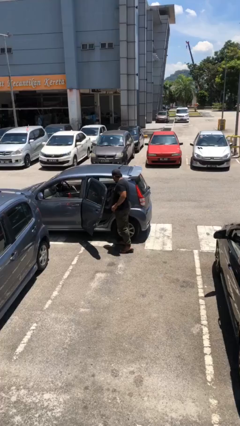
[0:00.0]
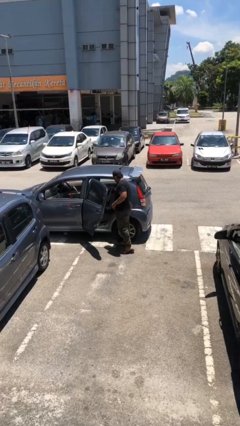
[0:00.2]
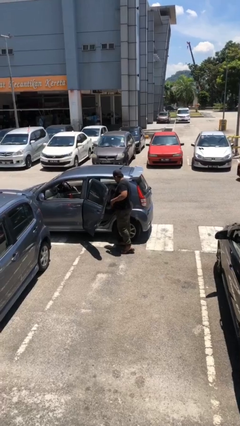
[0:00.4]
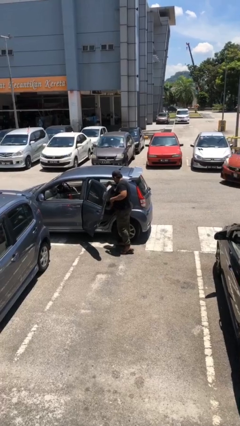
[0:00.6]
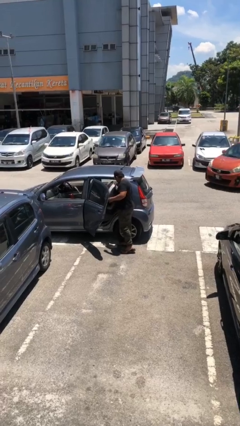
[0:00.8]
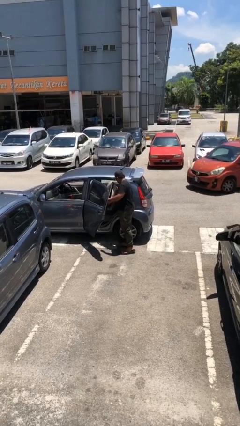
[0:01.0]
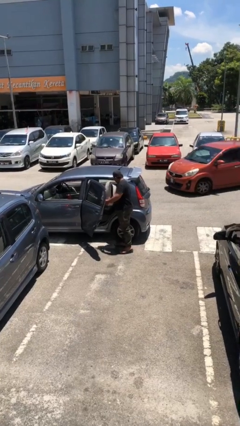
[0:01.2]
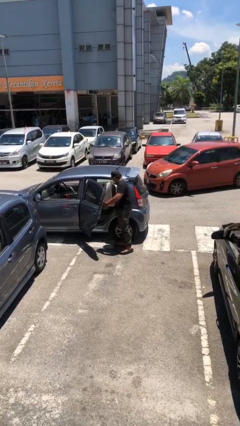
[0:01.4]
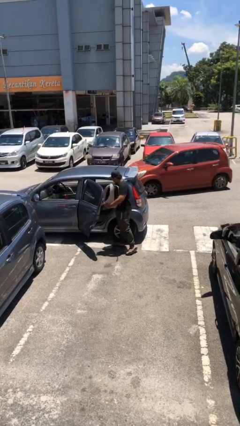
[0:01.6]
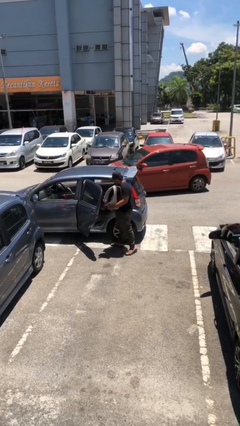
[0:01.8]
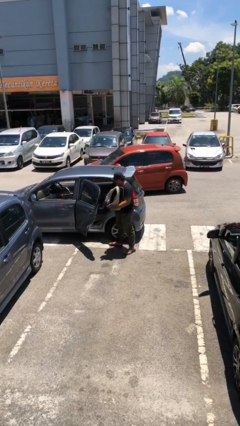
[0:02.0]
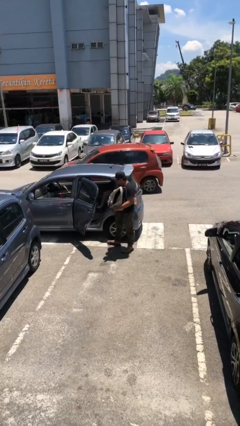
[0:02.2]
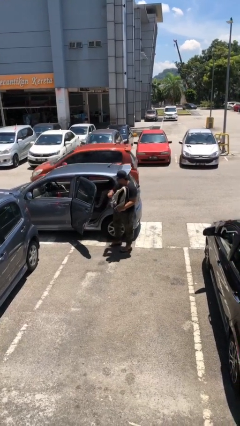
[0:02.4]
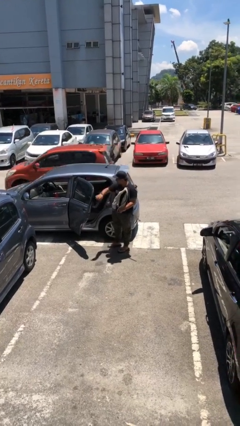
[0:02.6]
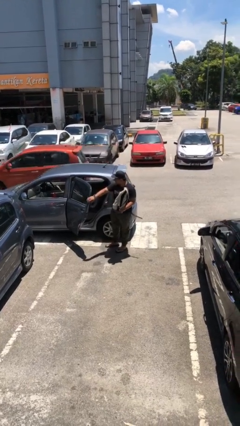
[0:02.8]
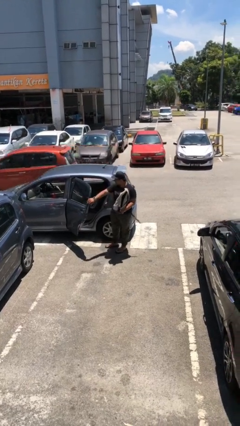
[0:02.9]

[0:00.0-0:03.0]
person unloads car

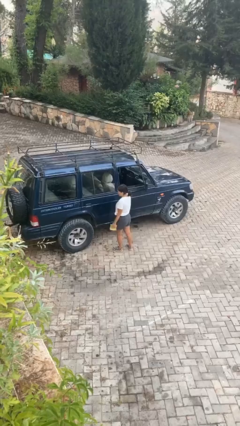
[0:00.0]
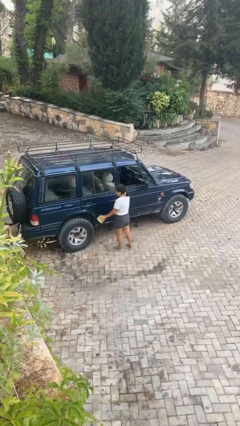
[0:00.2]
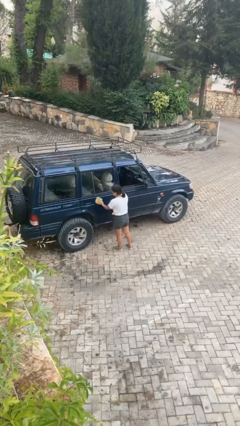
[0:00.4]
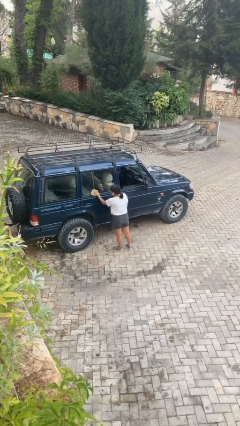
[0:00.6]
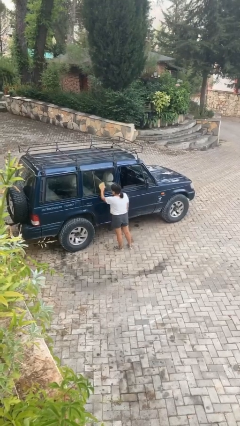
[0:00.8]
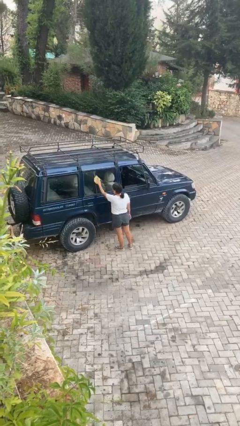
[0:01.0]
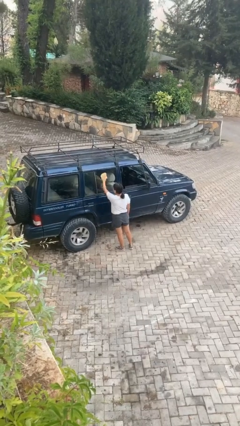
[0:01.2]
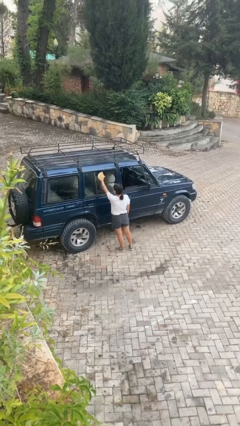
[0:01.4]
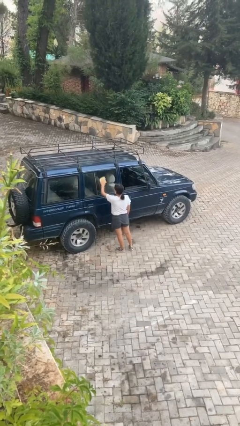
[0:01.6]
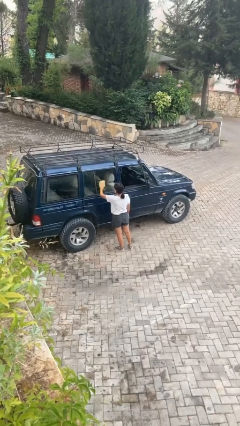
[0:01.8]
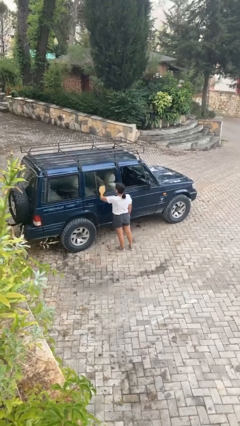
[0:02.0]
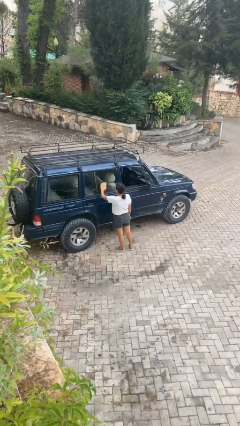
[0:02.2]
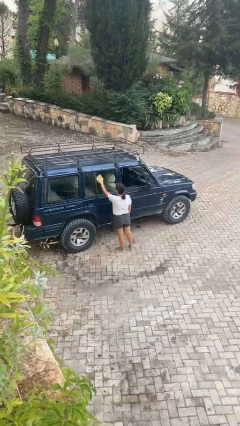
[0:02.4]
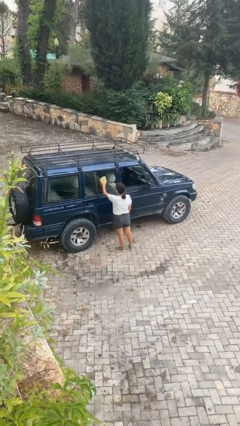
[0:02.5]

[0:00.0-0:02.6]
person polishes car with rag

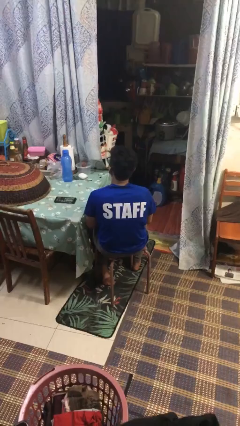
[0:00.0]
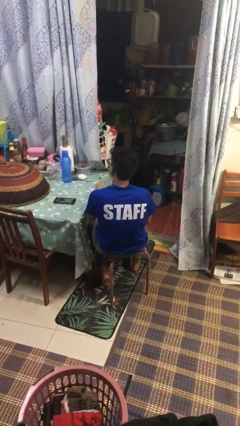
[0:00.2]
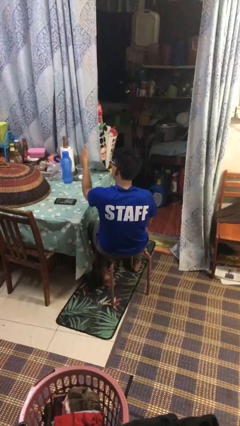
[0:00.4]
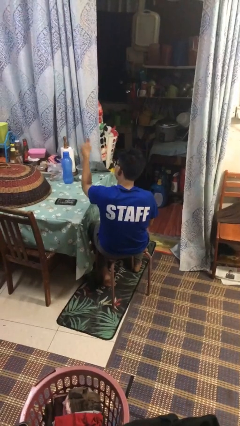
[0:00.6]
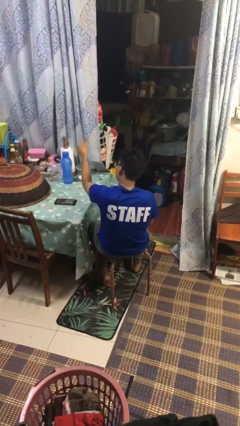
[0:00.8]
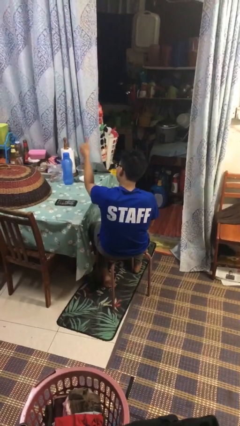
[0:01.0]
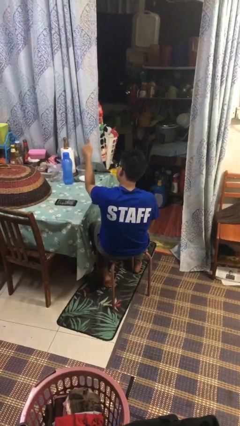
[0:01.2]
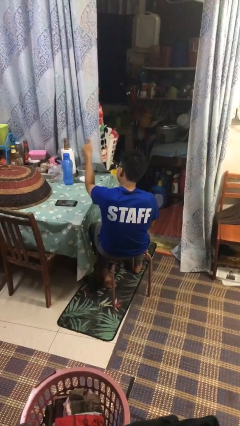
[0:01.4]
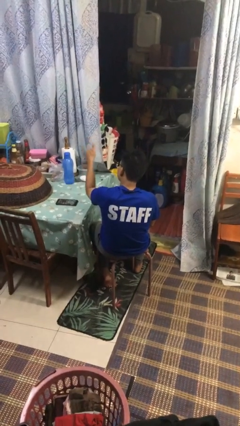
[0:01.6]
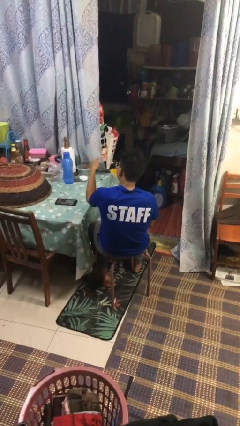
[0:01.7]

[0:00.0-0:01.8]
person gestures thumbs up

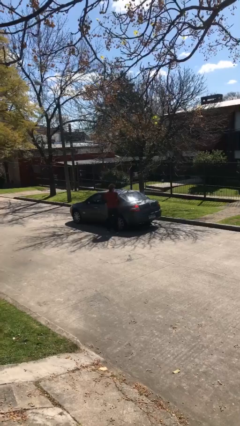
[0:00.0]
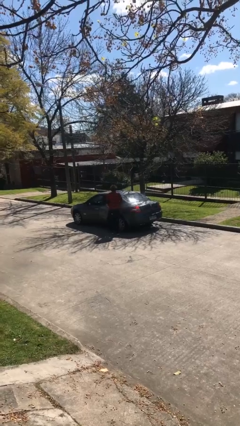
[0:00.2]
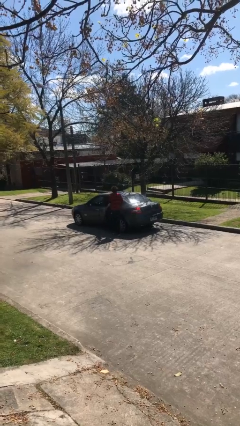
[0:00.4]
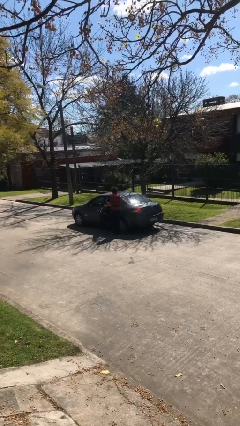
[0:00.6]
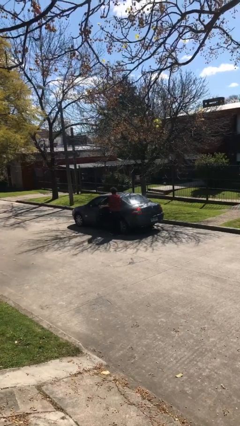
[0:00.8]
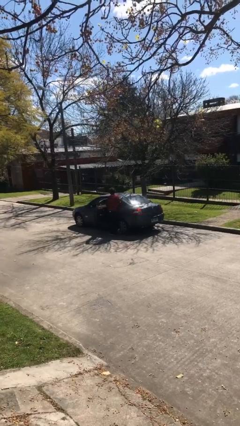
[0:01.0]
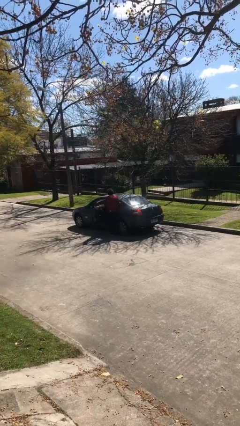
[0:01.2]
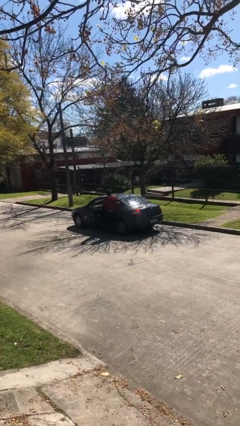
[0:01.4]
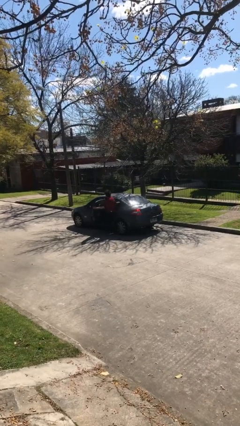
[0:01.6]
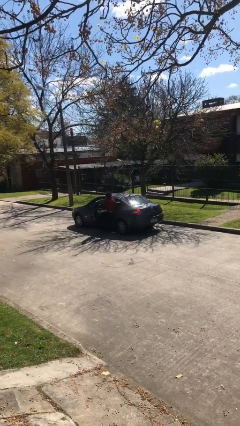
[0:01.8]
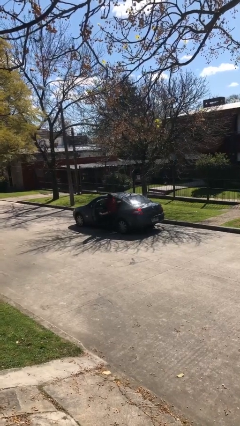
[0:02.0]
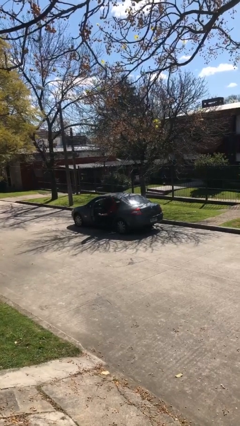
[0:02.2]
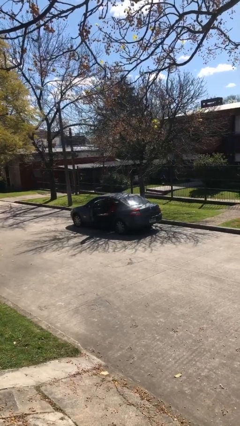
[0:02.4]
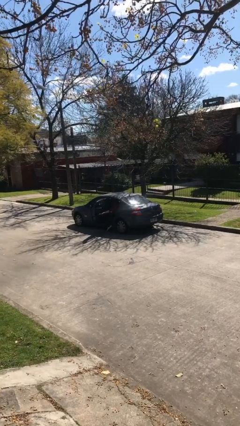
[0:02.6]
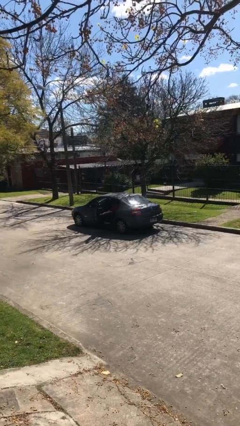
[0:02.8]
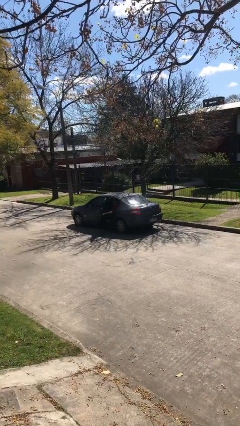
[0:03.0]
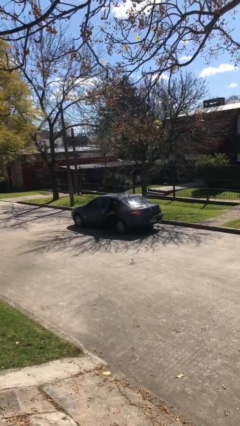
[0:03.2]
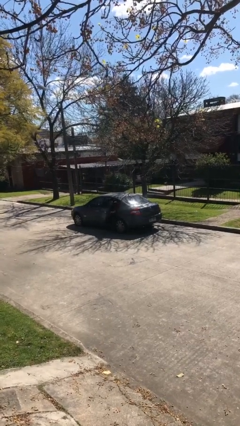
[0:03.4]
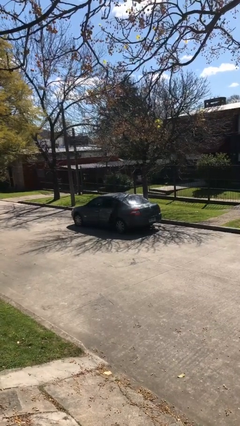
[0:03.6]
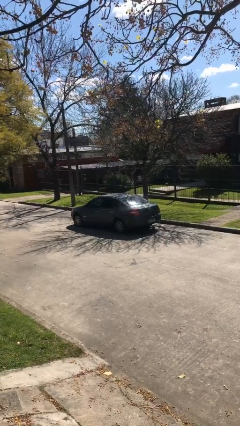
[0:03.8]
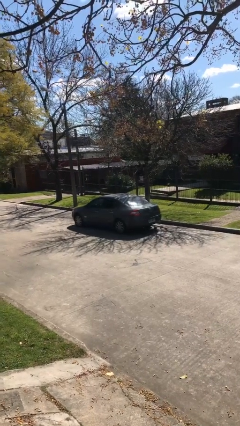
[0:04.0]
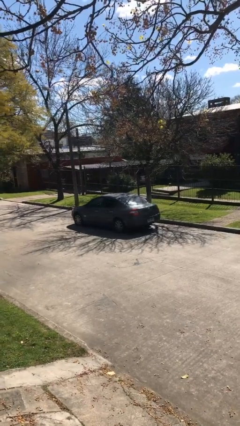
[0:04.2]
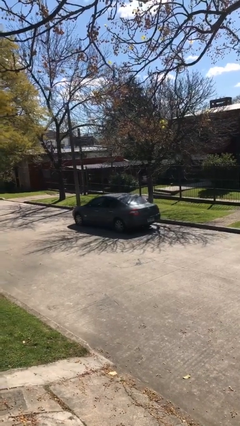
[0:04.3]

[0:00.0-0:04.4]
car picks up person

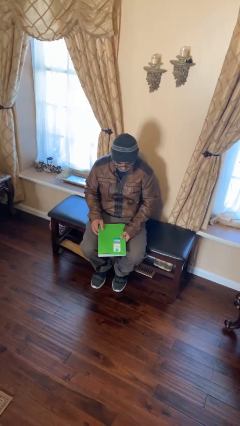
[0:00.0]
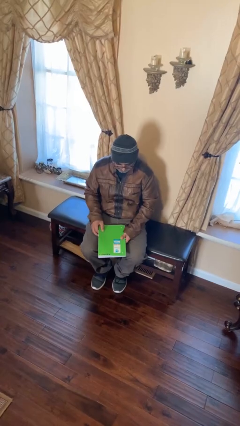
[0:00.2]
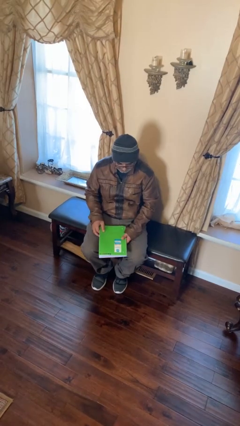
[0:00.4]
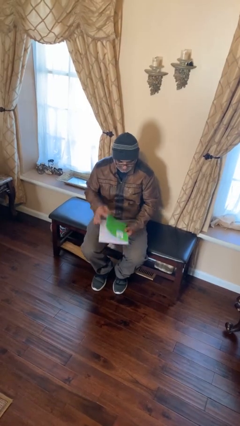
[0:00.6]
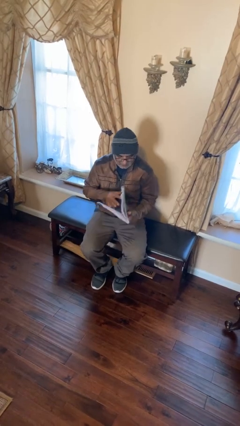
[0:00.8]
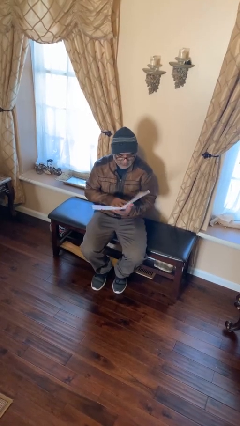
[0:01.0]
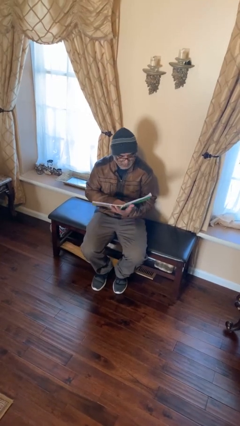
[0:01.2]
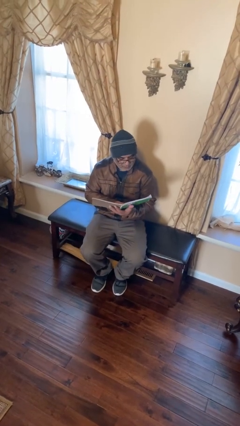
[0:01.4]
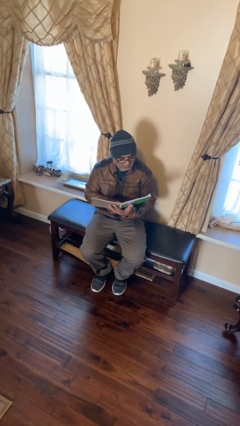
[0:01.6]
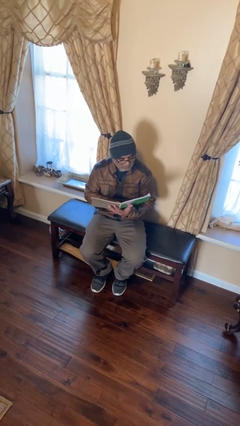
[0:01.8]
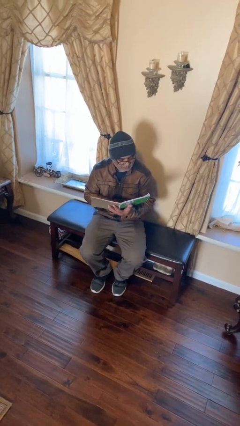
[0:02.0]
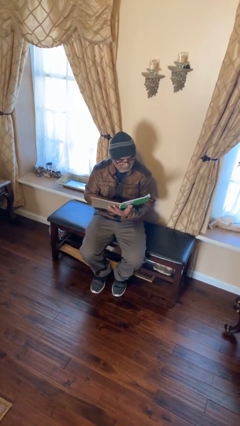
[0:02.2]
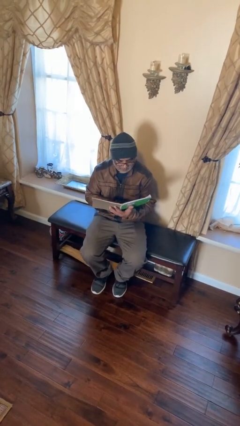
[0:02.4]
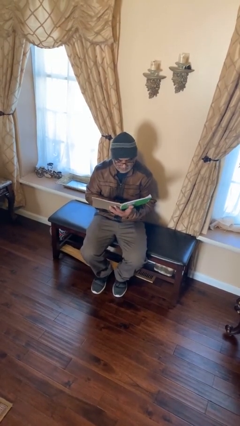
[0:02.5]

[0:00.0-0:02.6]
person reads document

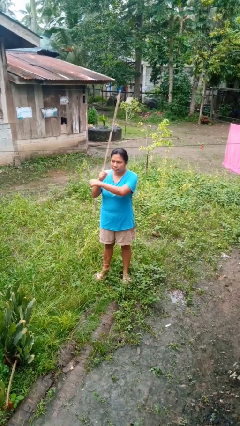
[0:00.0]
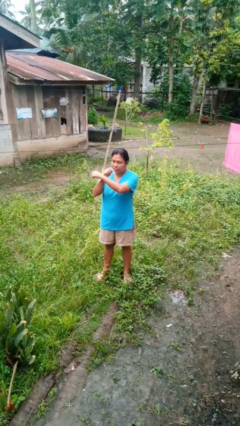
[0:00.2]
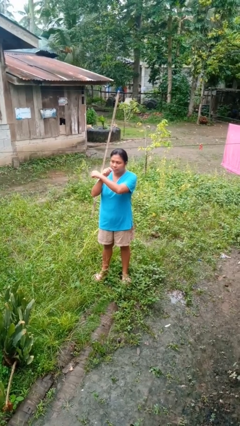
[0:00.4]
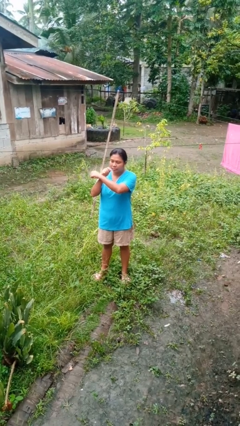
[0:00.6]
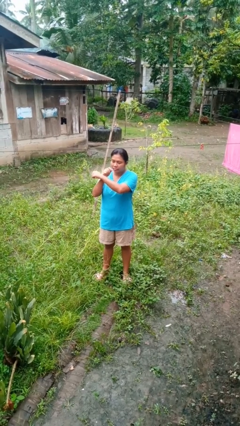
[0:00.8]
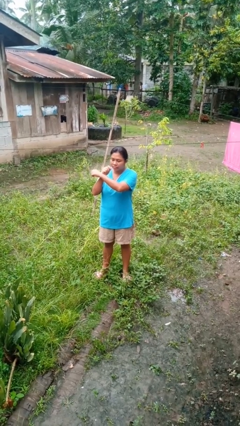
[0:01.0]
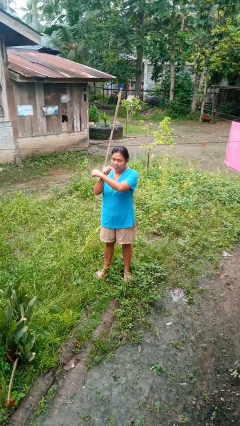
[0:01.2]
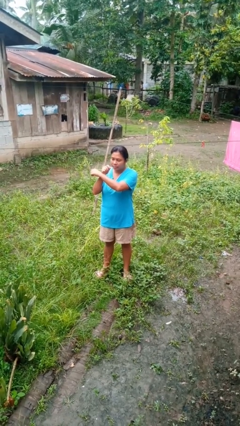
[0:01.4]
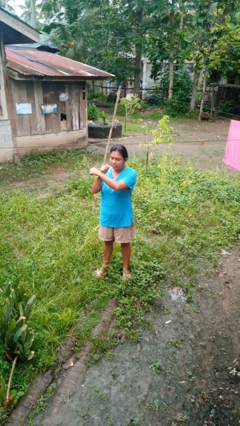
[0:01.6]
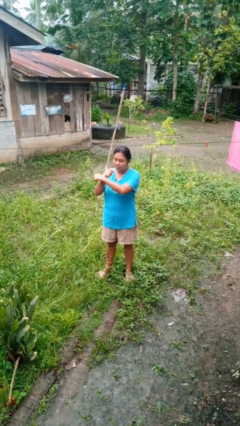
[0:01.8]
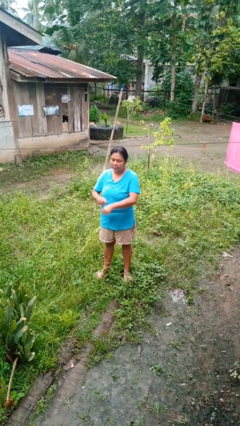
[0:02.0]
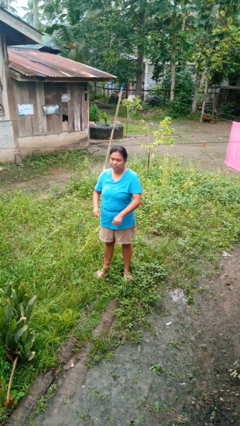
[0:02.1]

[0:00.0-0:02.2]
person gestures arms x

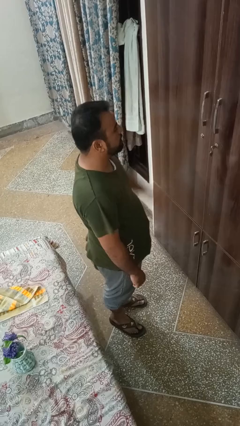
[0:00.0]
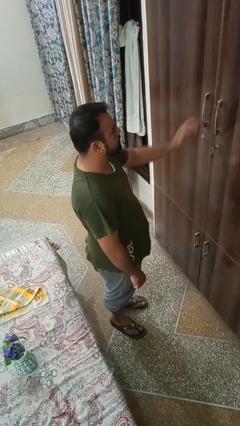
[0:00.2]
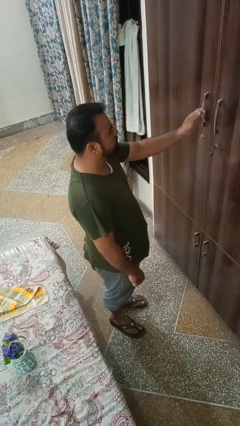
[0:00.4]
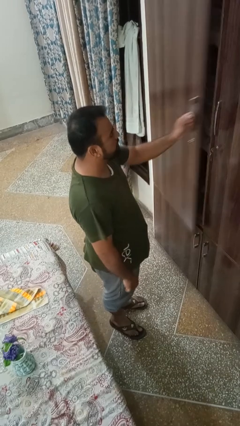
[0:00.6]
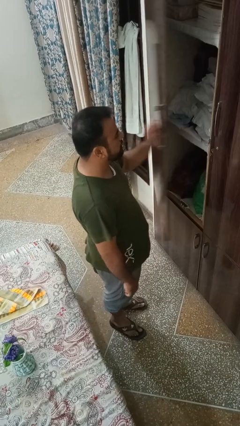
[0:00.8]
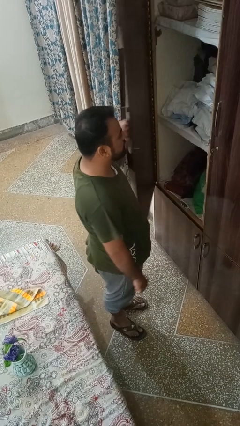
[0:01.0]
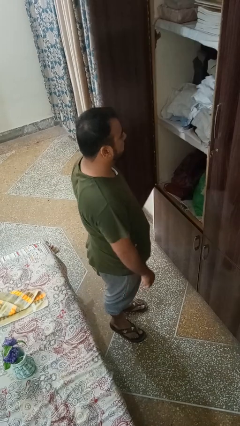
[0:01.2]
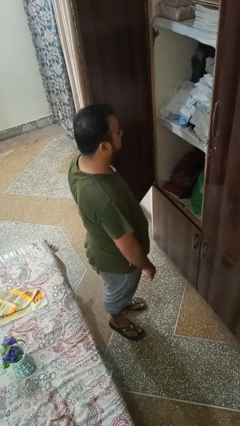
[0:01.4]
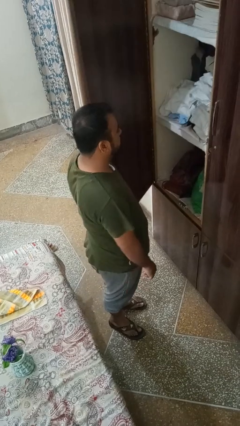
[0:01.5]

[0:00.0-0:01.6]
person opens closet door
